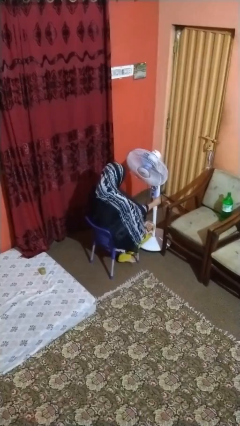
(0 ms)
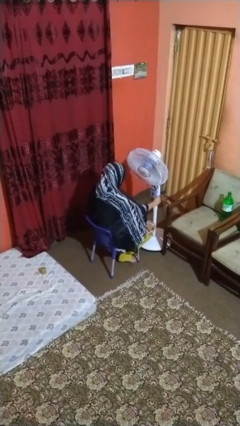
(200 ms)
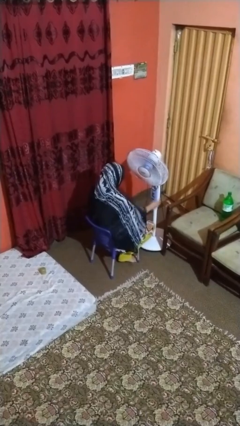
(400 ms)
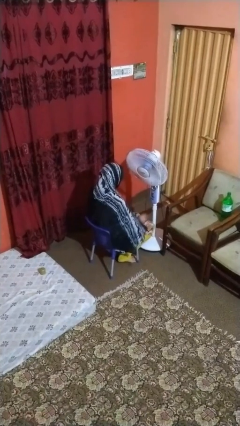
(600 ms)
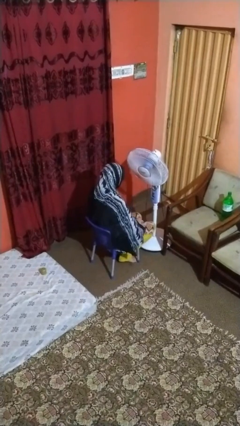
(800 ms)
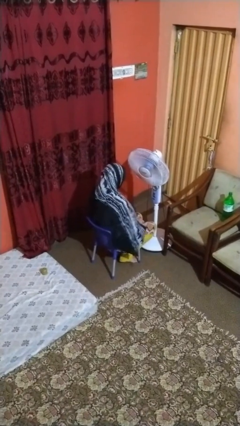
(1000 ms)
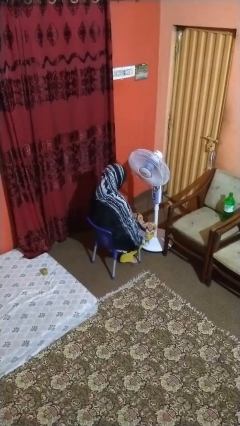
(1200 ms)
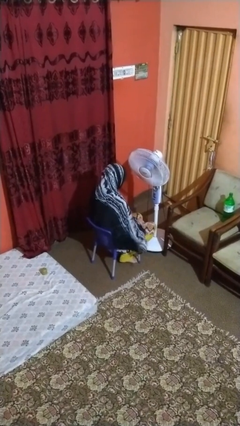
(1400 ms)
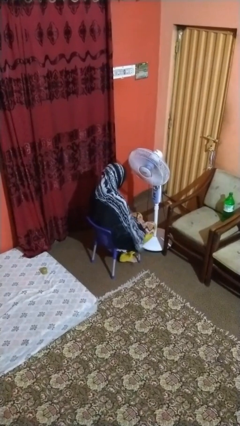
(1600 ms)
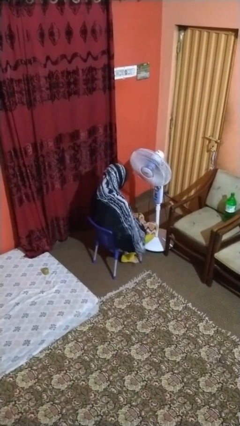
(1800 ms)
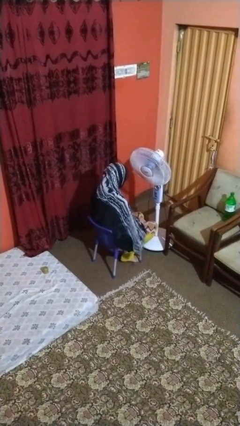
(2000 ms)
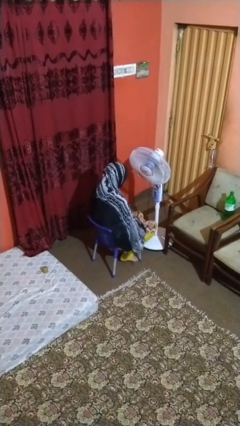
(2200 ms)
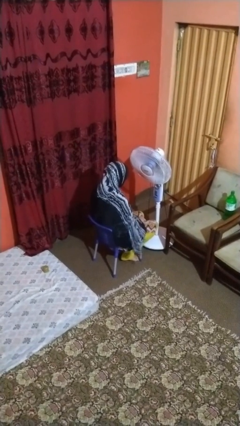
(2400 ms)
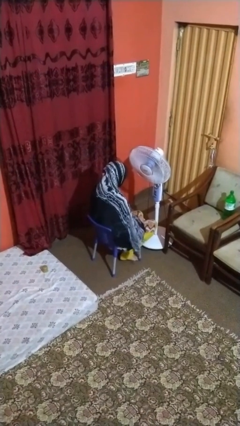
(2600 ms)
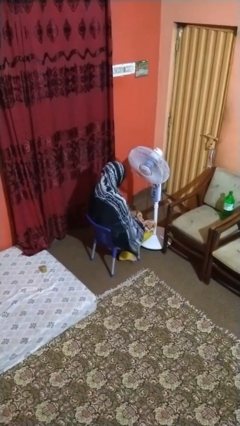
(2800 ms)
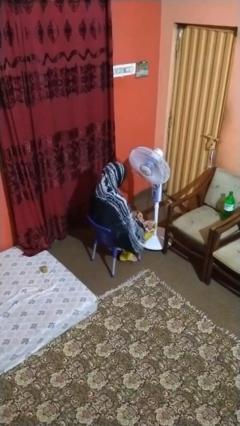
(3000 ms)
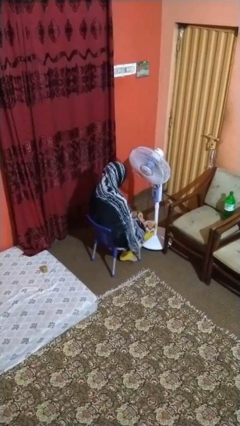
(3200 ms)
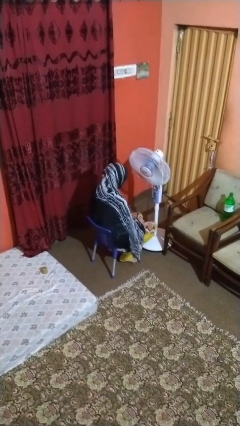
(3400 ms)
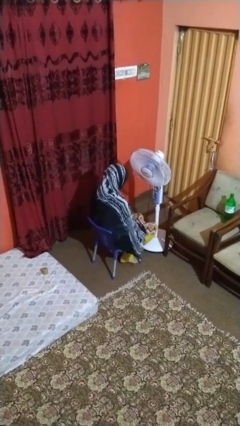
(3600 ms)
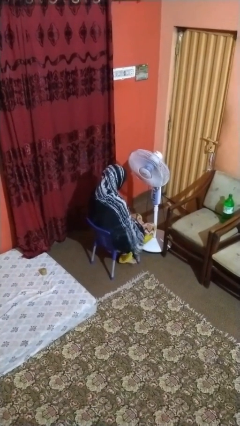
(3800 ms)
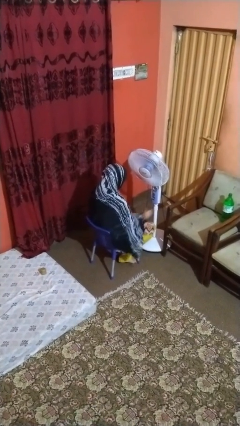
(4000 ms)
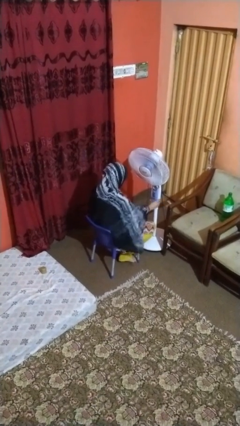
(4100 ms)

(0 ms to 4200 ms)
person turns on fan

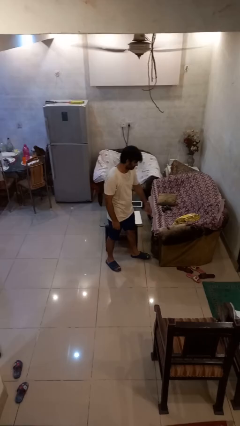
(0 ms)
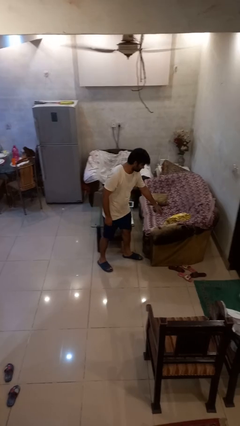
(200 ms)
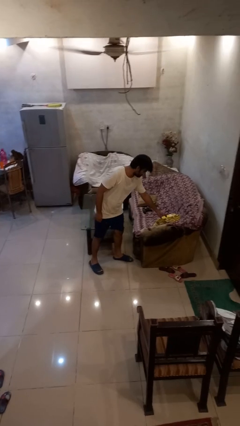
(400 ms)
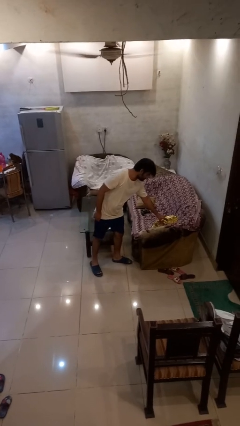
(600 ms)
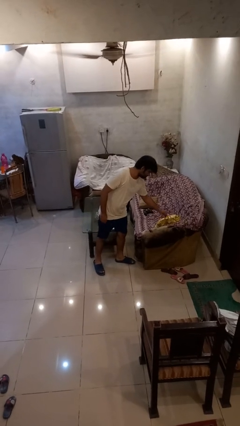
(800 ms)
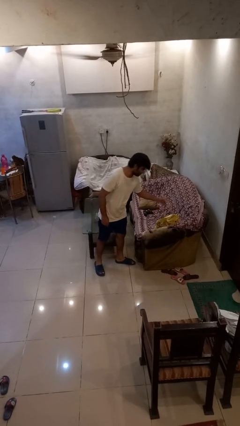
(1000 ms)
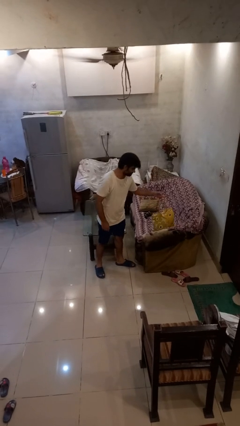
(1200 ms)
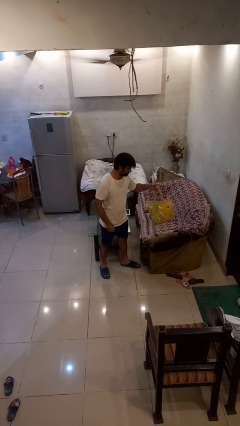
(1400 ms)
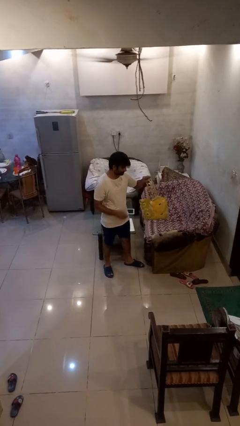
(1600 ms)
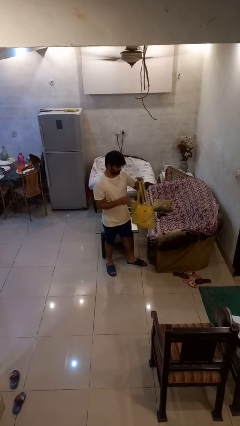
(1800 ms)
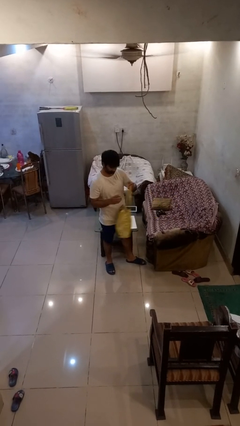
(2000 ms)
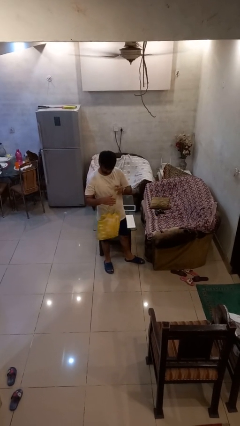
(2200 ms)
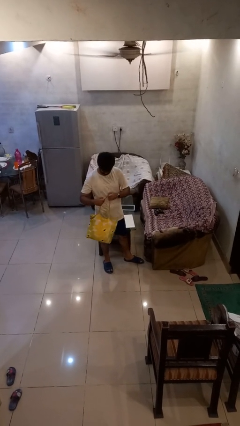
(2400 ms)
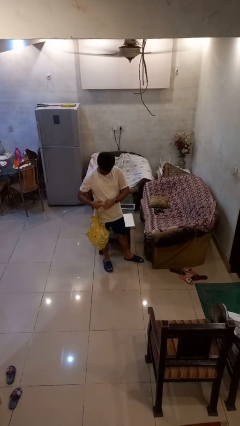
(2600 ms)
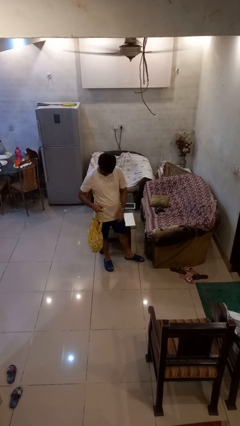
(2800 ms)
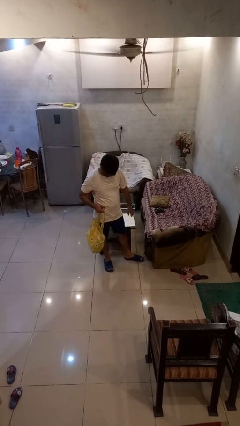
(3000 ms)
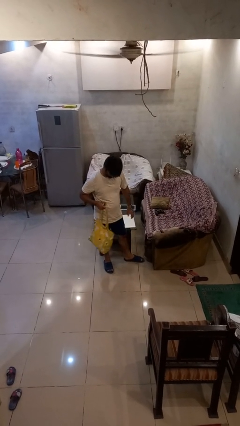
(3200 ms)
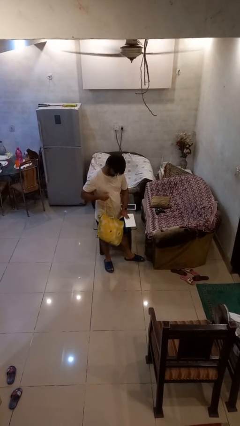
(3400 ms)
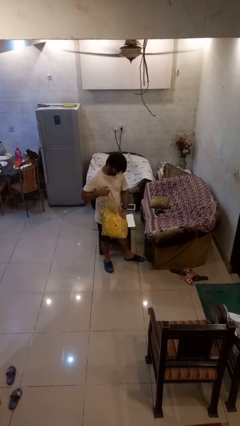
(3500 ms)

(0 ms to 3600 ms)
person picks up object from couch

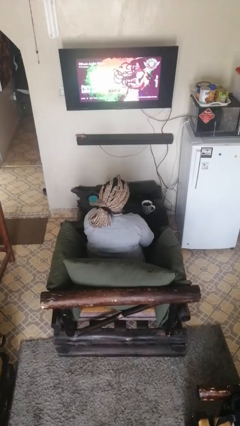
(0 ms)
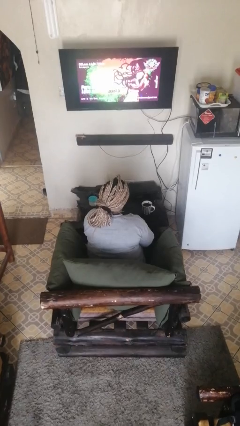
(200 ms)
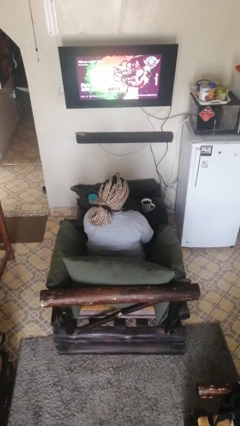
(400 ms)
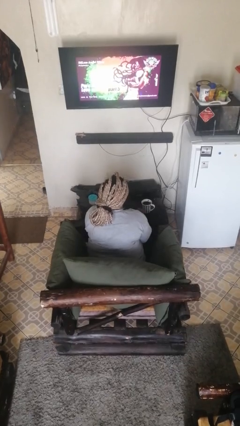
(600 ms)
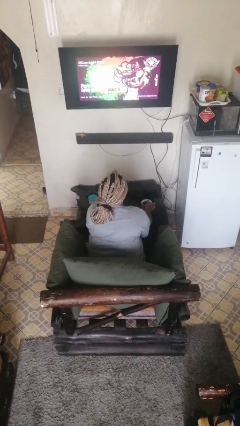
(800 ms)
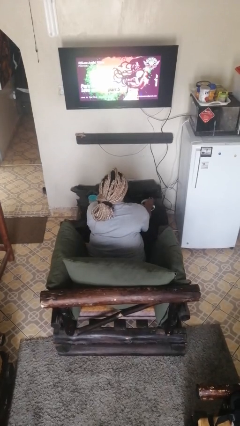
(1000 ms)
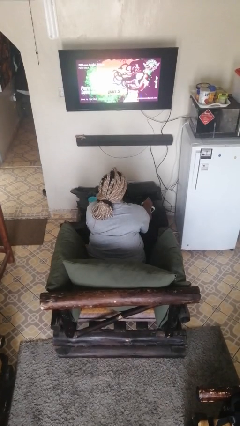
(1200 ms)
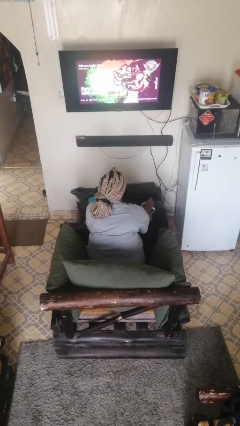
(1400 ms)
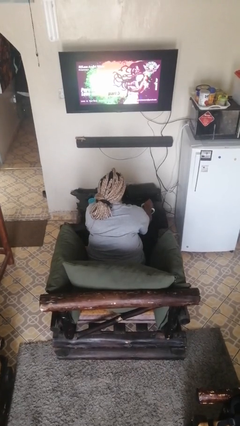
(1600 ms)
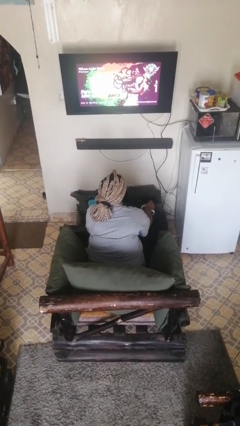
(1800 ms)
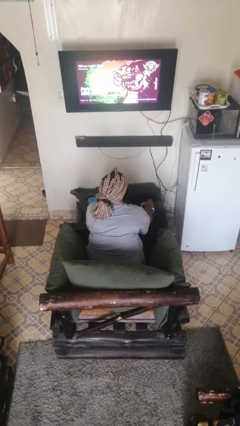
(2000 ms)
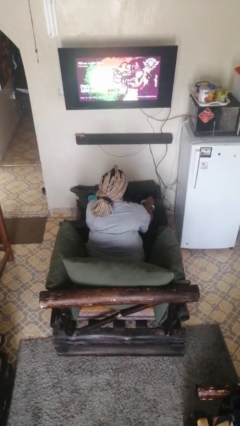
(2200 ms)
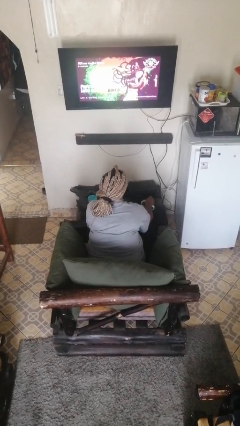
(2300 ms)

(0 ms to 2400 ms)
person stirs mug

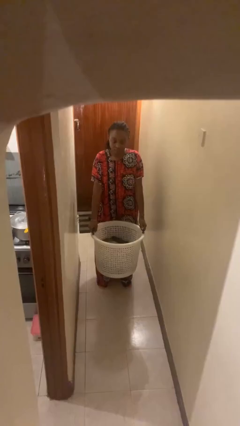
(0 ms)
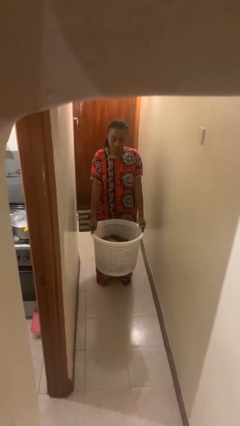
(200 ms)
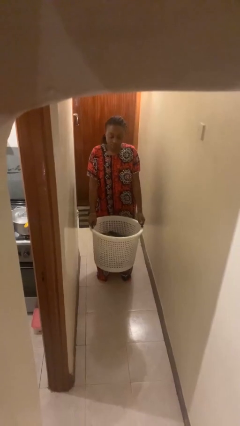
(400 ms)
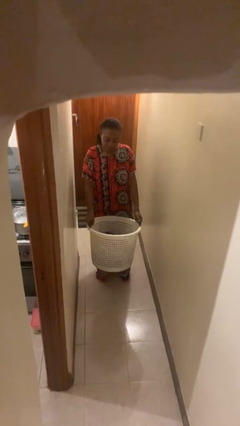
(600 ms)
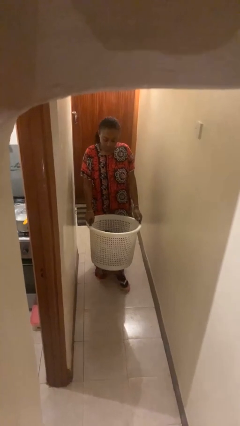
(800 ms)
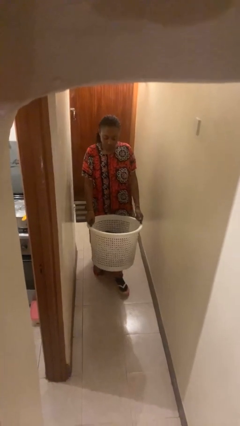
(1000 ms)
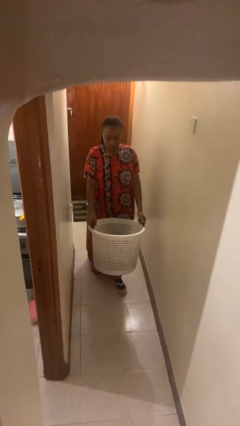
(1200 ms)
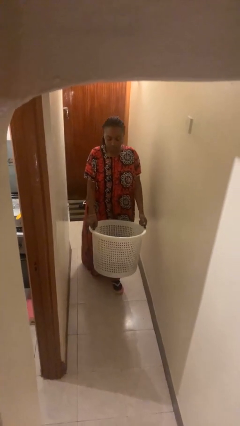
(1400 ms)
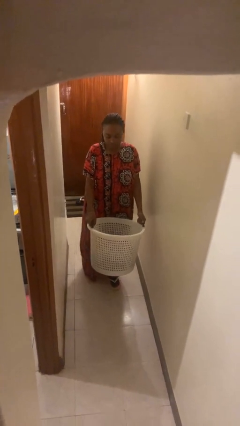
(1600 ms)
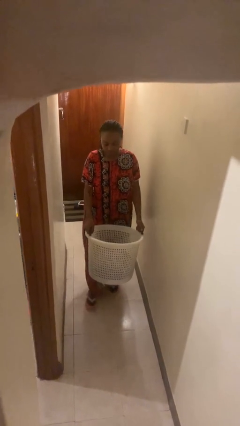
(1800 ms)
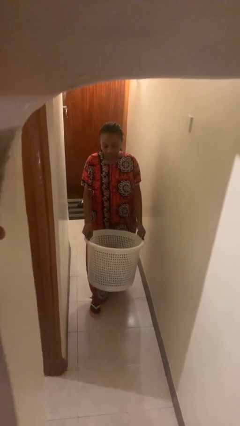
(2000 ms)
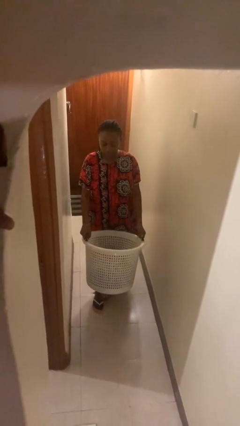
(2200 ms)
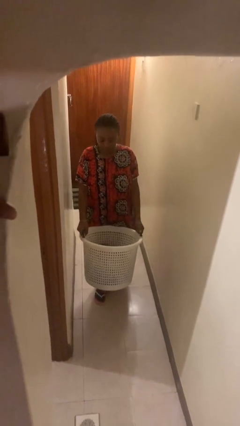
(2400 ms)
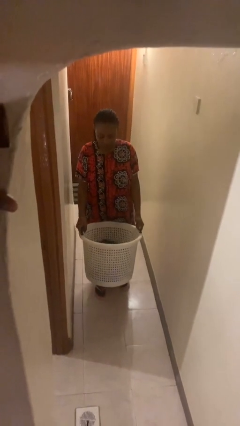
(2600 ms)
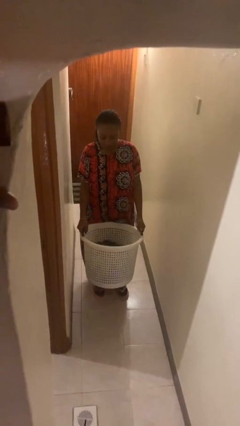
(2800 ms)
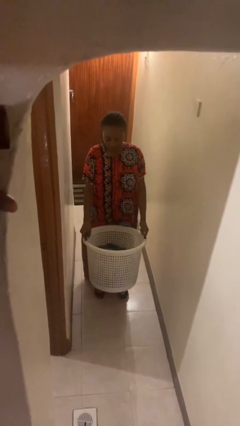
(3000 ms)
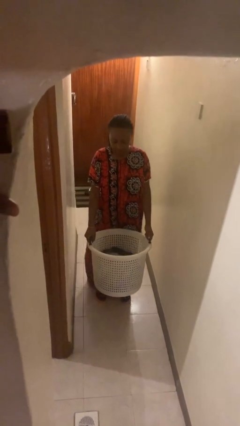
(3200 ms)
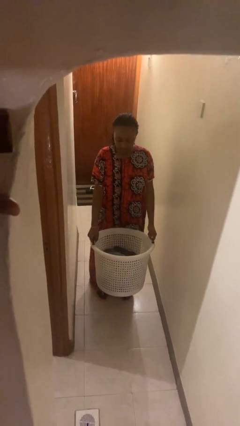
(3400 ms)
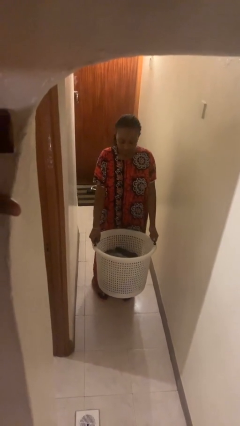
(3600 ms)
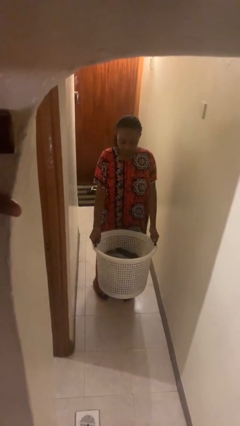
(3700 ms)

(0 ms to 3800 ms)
person carries laundry basket

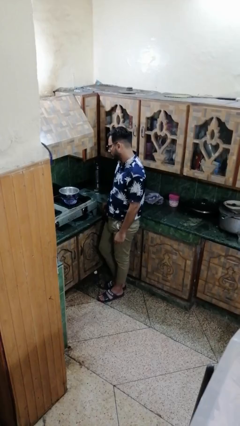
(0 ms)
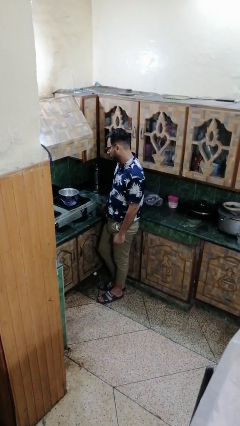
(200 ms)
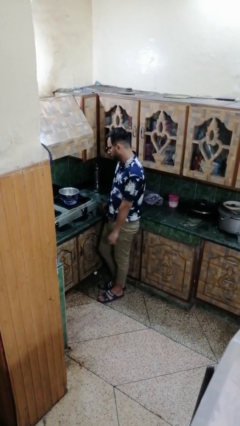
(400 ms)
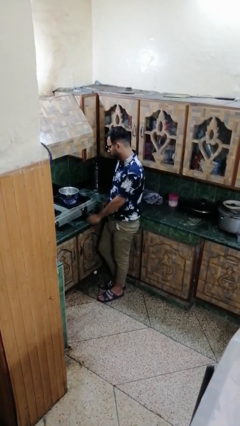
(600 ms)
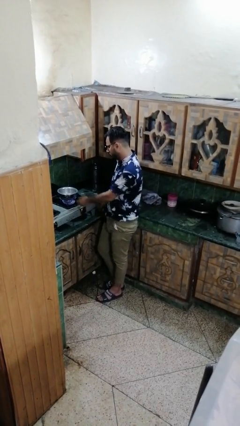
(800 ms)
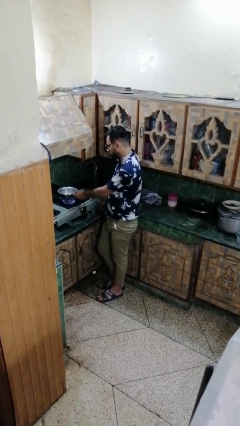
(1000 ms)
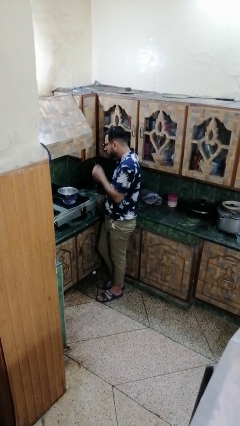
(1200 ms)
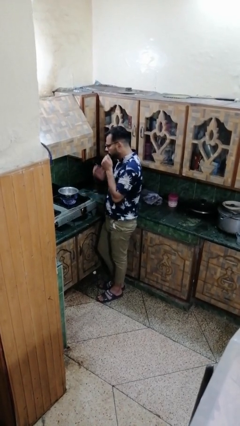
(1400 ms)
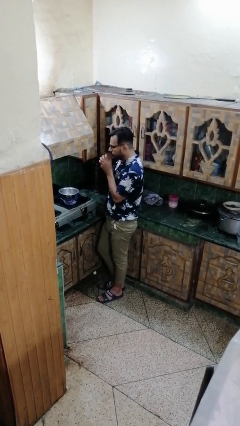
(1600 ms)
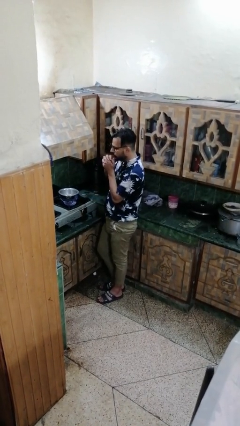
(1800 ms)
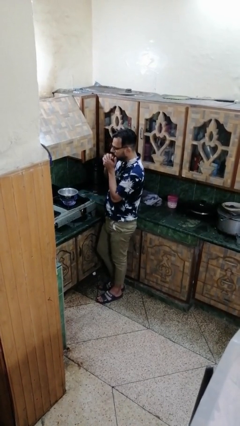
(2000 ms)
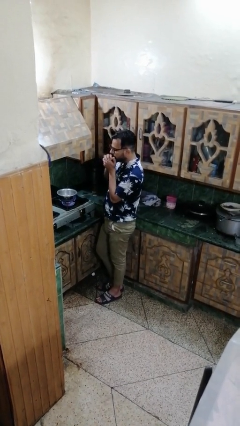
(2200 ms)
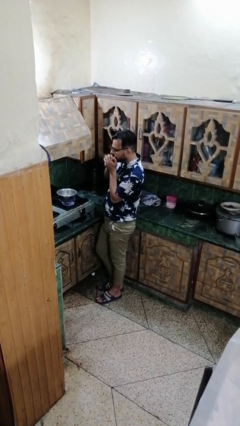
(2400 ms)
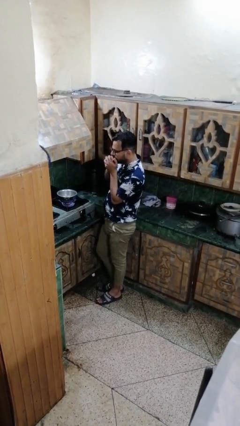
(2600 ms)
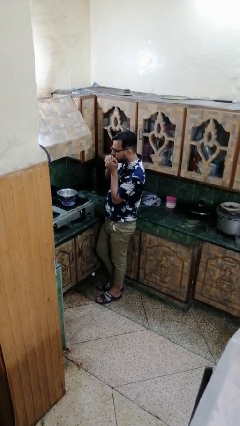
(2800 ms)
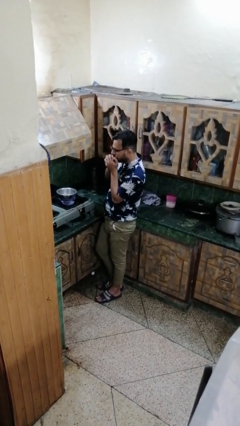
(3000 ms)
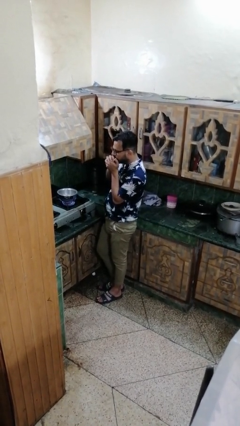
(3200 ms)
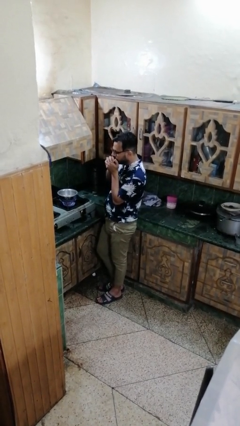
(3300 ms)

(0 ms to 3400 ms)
person burns hand

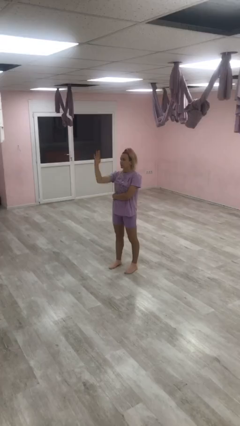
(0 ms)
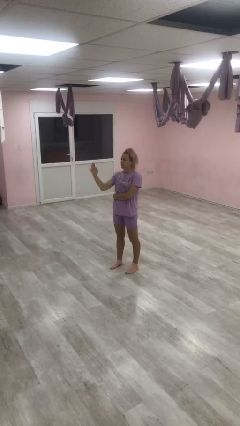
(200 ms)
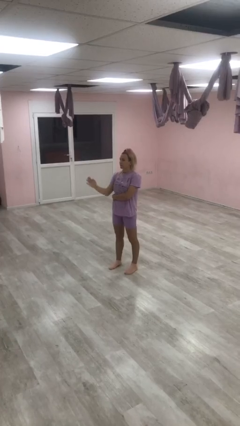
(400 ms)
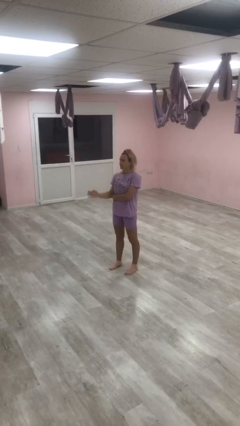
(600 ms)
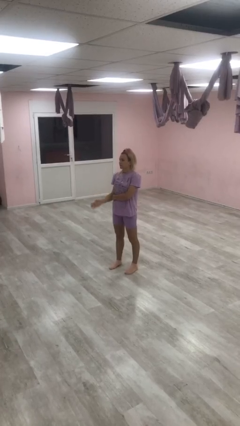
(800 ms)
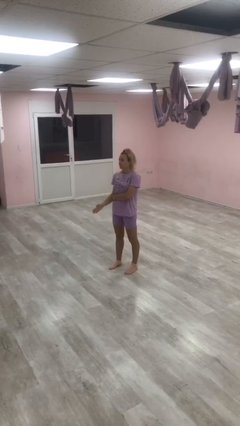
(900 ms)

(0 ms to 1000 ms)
person gestures lower hand
